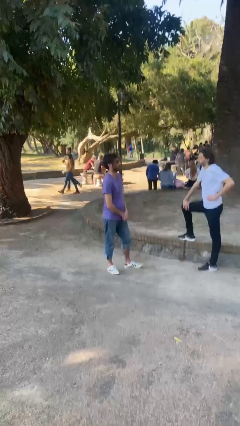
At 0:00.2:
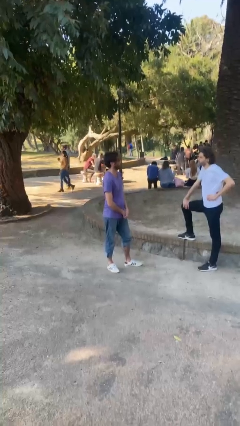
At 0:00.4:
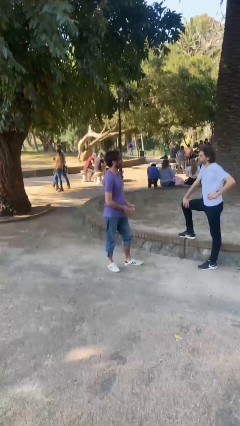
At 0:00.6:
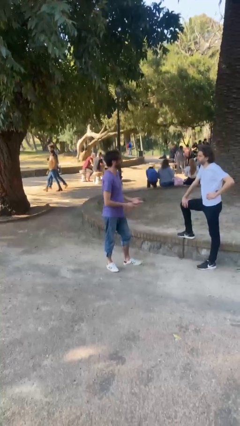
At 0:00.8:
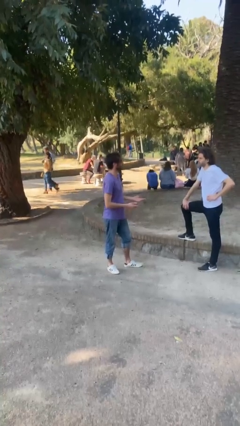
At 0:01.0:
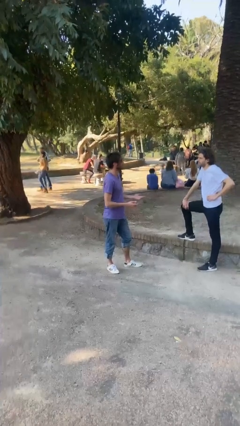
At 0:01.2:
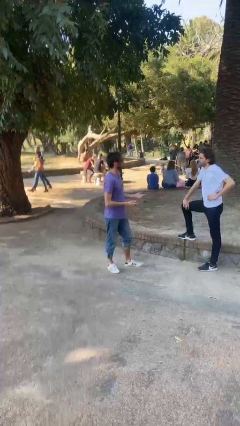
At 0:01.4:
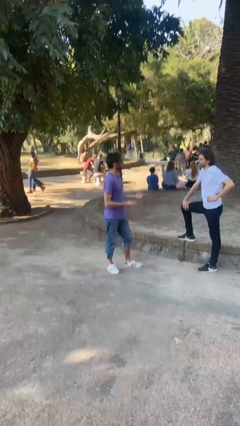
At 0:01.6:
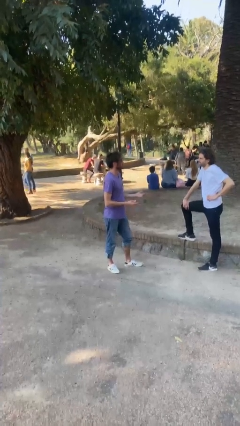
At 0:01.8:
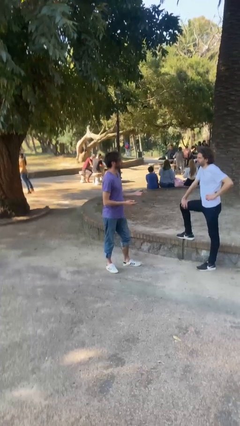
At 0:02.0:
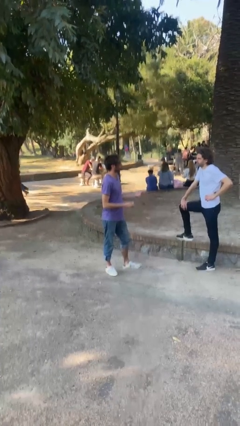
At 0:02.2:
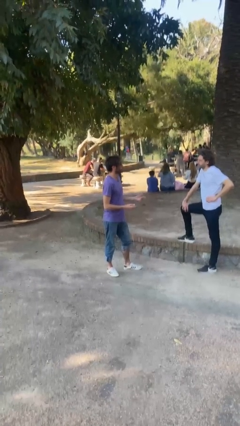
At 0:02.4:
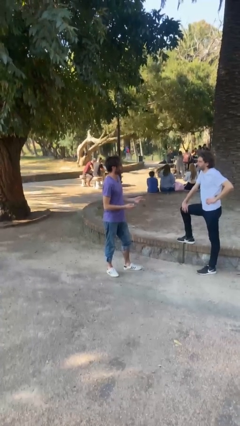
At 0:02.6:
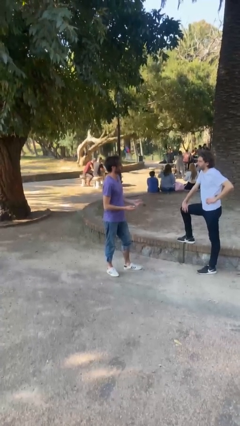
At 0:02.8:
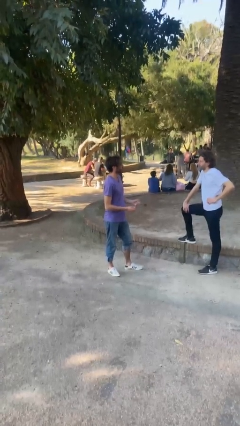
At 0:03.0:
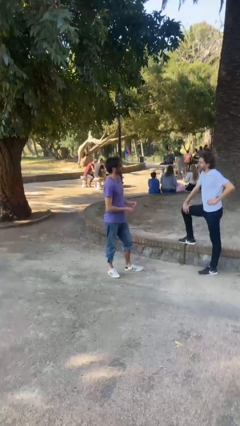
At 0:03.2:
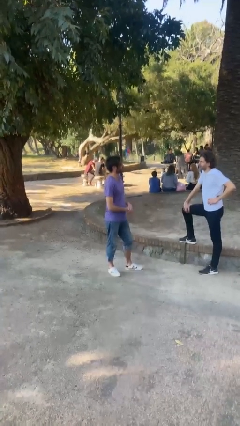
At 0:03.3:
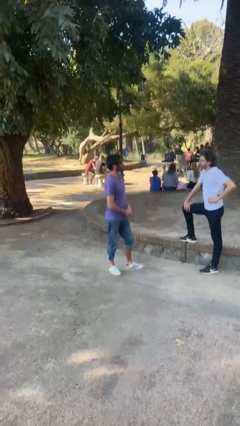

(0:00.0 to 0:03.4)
person talks to person

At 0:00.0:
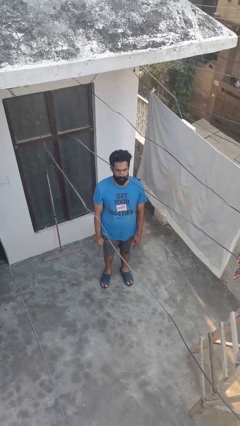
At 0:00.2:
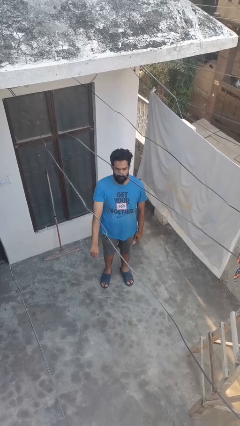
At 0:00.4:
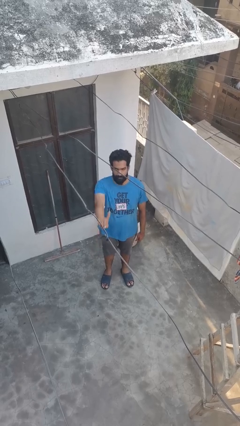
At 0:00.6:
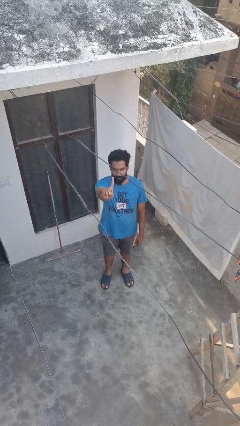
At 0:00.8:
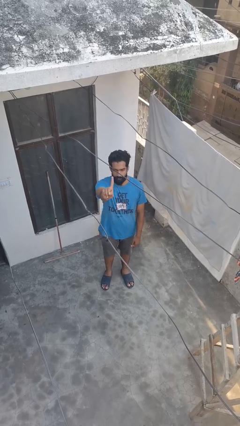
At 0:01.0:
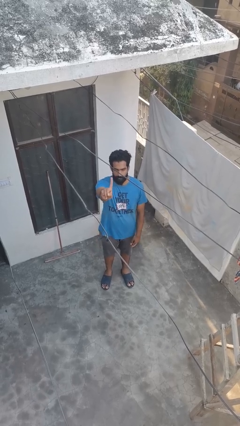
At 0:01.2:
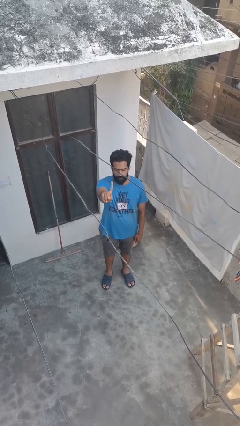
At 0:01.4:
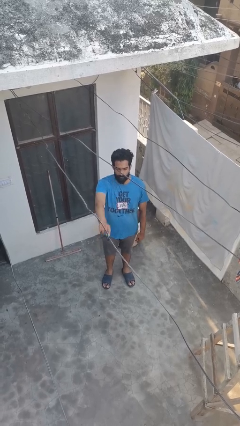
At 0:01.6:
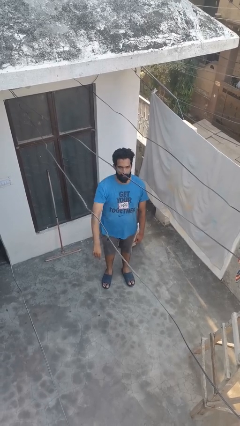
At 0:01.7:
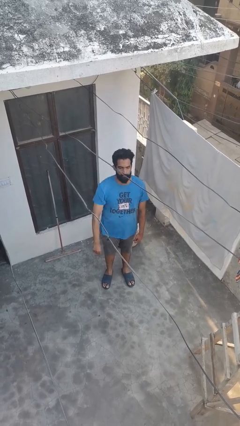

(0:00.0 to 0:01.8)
person gestures number one

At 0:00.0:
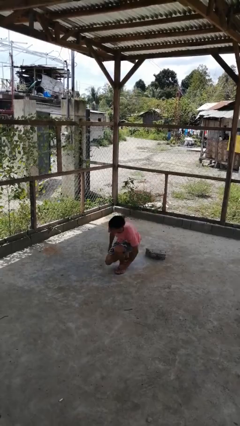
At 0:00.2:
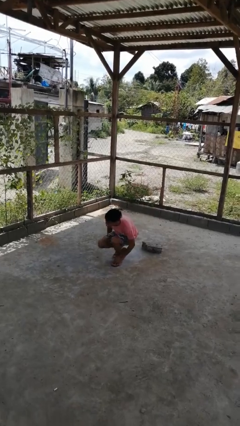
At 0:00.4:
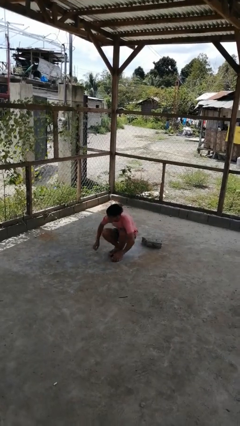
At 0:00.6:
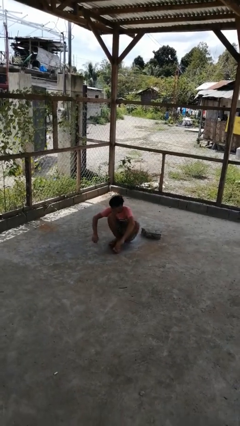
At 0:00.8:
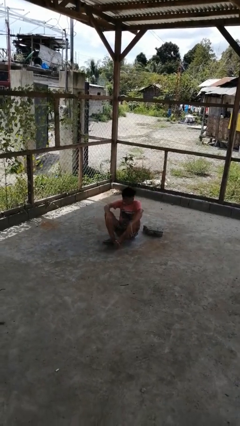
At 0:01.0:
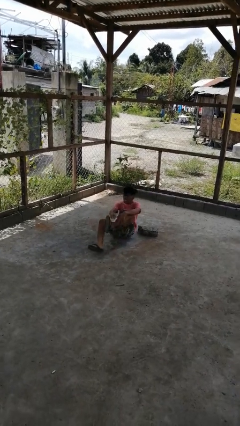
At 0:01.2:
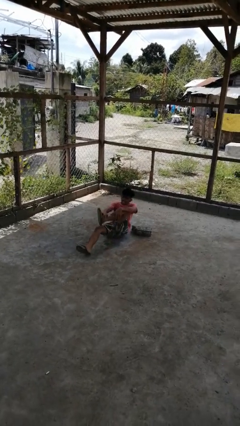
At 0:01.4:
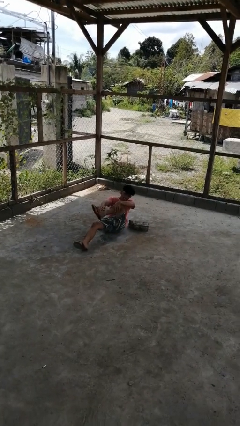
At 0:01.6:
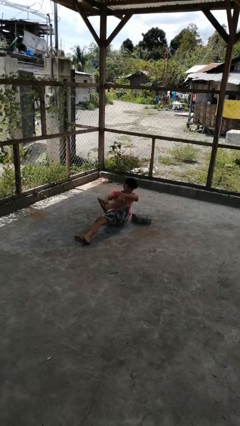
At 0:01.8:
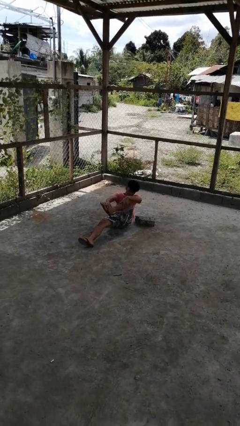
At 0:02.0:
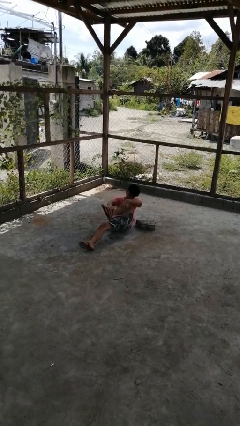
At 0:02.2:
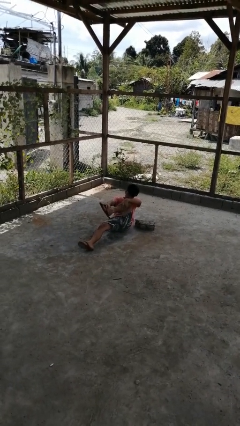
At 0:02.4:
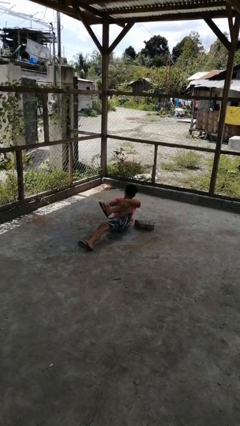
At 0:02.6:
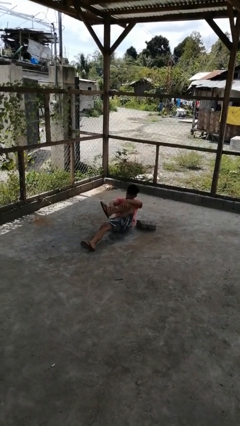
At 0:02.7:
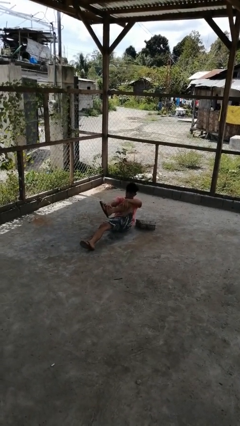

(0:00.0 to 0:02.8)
person lies down on floor

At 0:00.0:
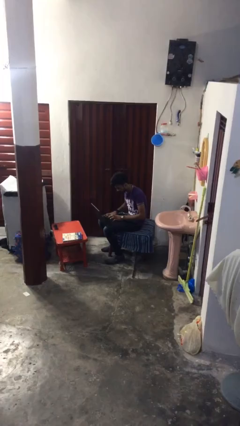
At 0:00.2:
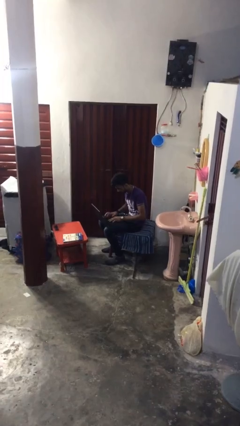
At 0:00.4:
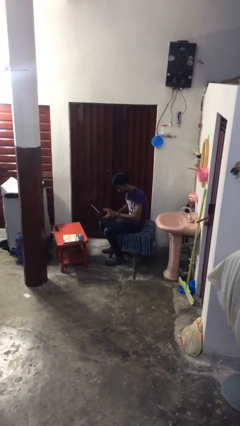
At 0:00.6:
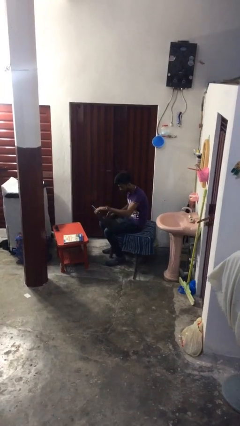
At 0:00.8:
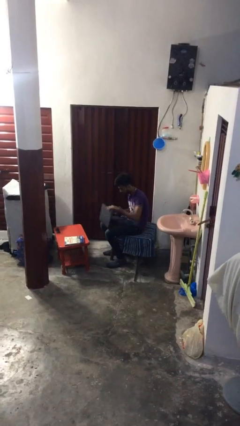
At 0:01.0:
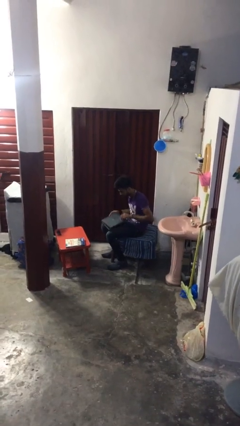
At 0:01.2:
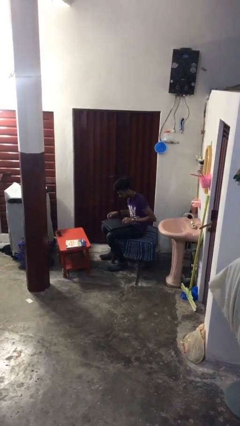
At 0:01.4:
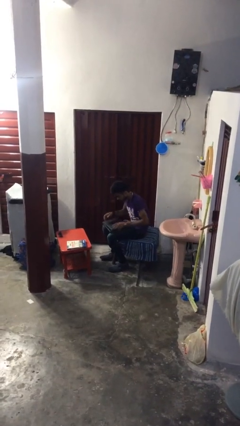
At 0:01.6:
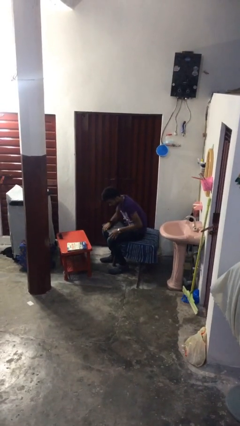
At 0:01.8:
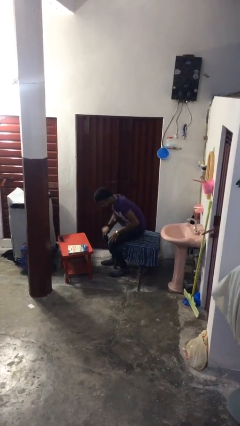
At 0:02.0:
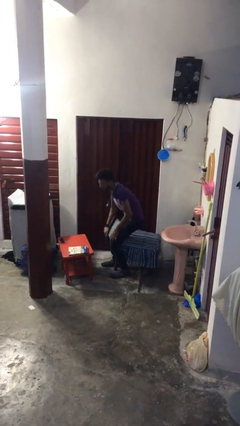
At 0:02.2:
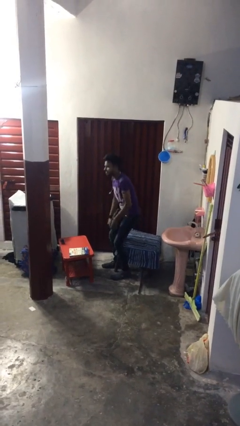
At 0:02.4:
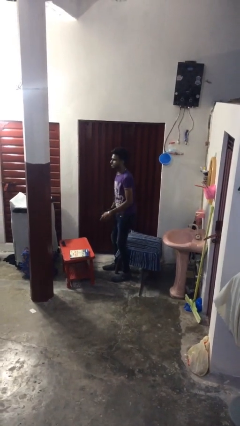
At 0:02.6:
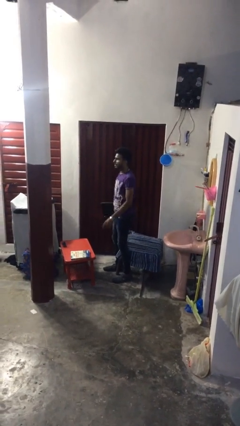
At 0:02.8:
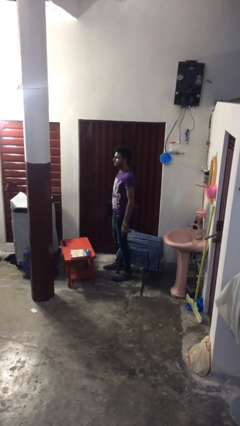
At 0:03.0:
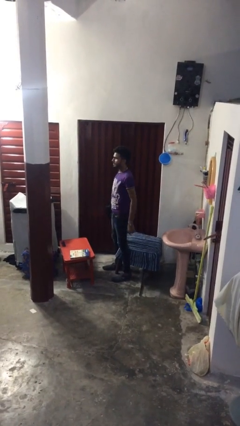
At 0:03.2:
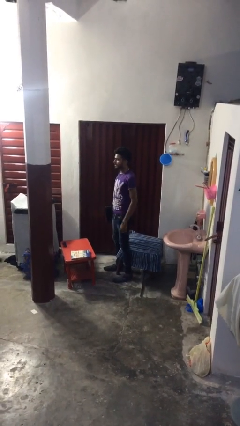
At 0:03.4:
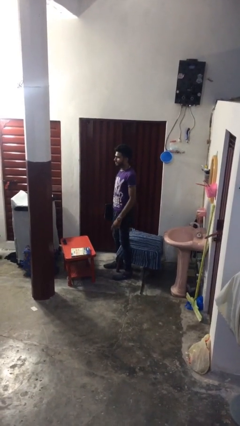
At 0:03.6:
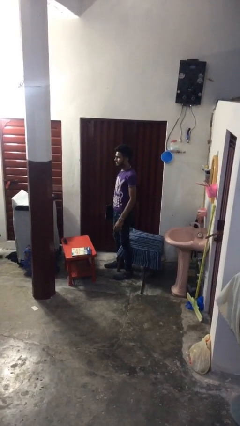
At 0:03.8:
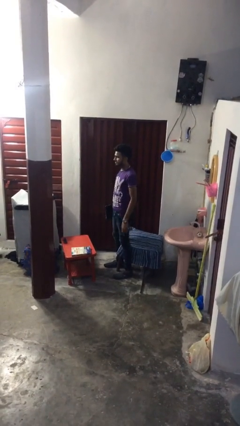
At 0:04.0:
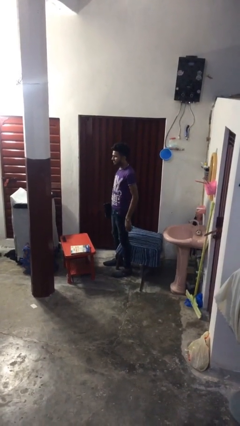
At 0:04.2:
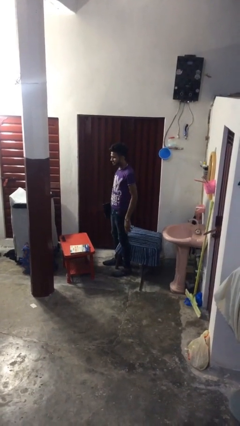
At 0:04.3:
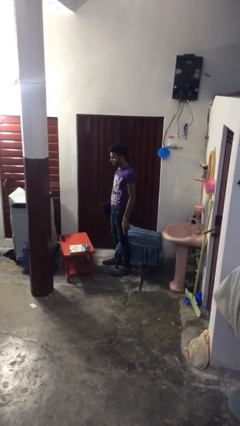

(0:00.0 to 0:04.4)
person stands up

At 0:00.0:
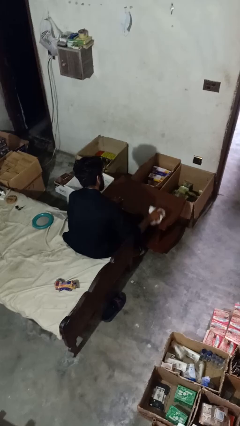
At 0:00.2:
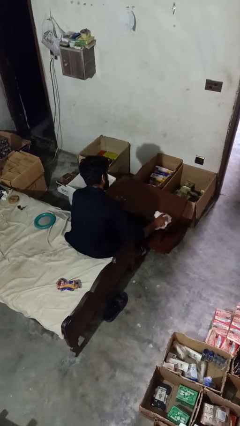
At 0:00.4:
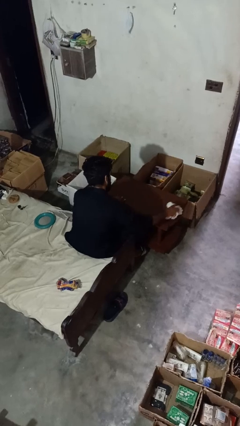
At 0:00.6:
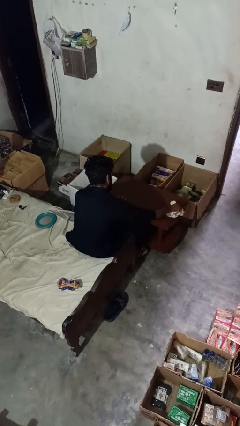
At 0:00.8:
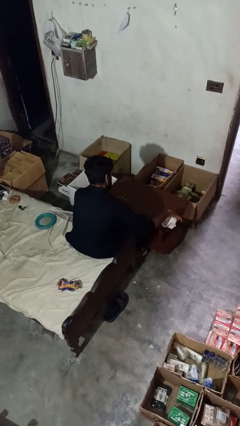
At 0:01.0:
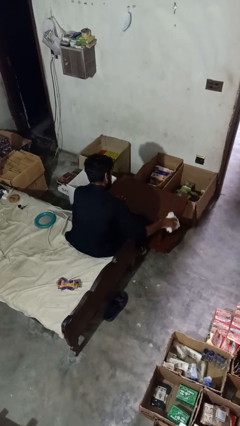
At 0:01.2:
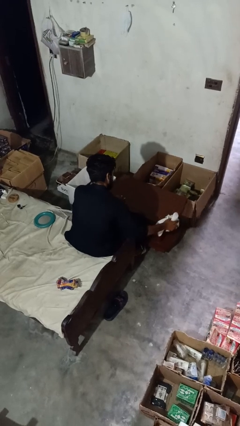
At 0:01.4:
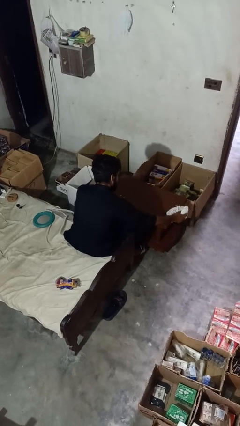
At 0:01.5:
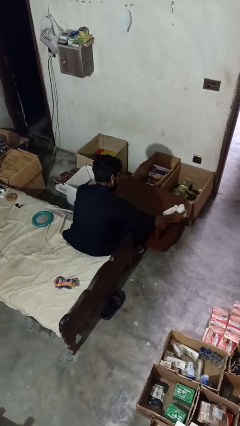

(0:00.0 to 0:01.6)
person cleans table with rag

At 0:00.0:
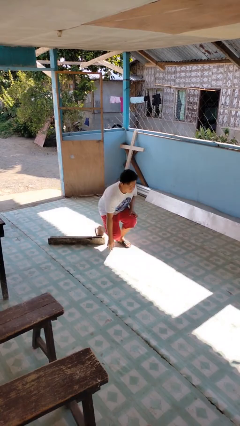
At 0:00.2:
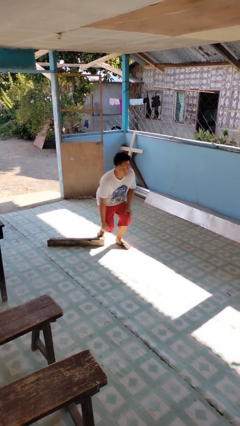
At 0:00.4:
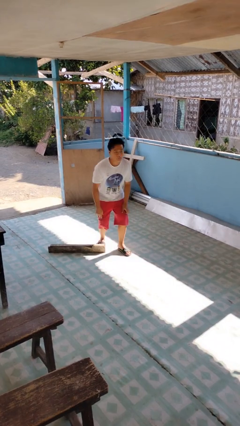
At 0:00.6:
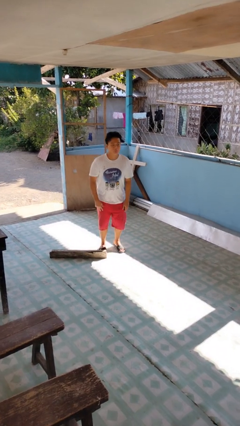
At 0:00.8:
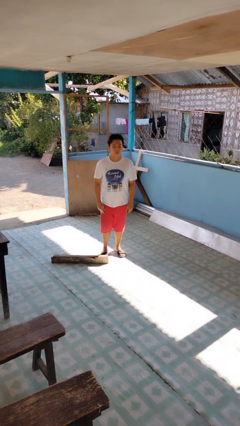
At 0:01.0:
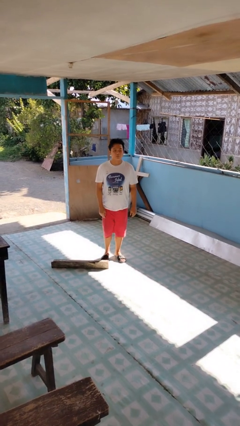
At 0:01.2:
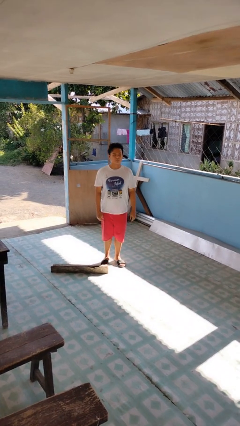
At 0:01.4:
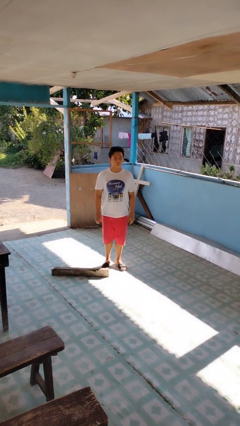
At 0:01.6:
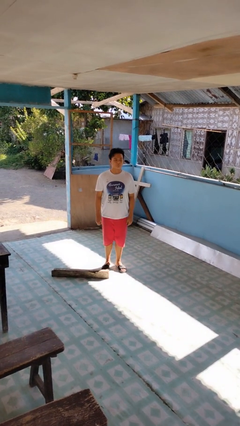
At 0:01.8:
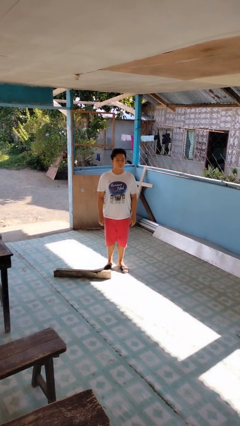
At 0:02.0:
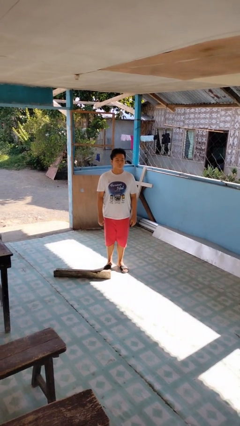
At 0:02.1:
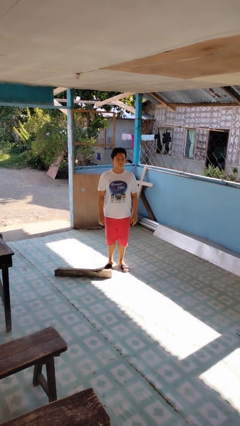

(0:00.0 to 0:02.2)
person stands up from floor

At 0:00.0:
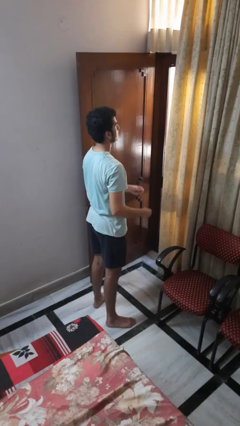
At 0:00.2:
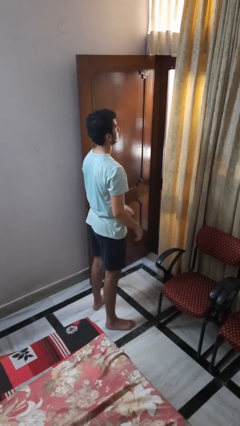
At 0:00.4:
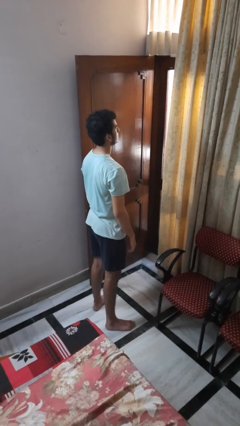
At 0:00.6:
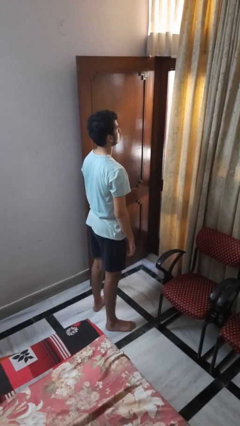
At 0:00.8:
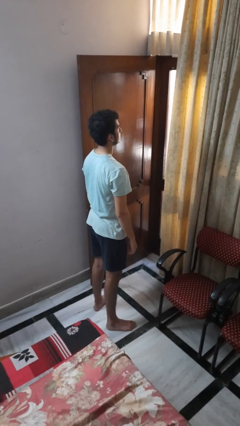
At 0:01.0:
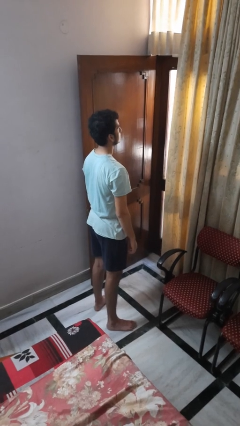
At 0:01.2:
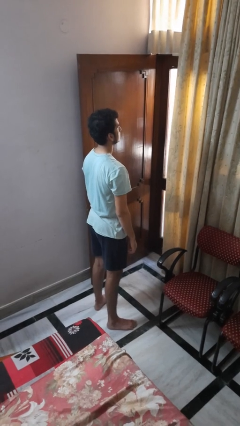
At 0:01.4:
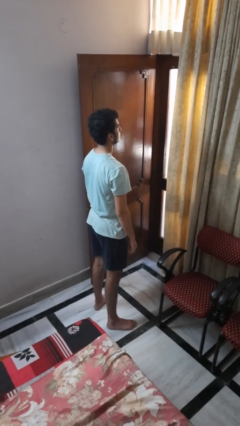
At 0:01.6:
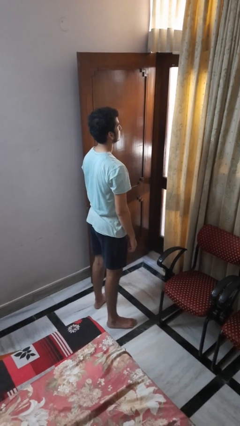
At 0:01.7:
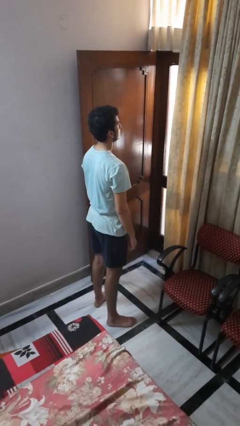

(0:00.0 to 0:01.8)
person takes off ring
